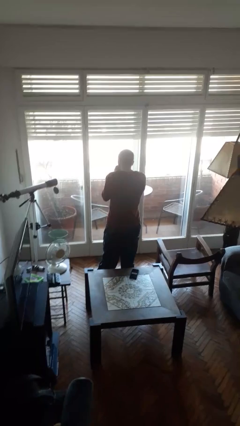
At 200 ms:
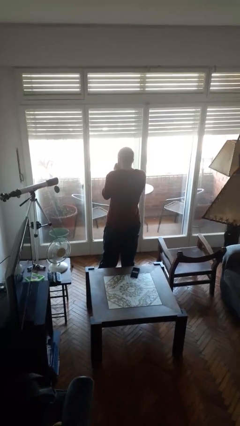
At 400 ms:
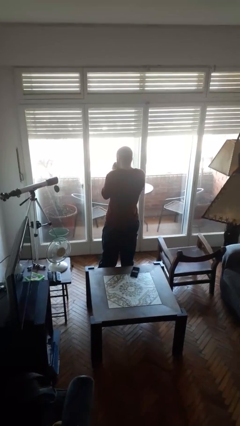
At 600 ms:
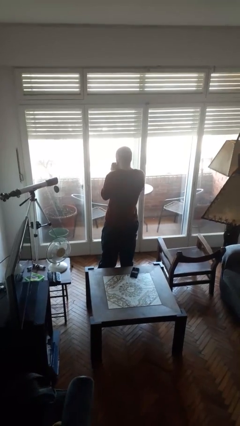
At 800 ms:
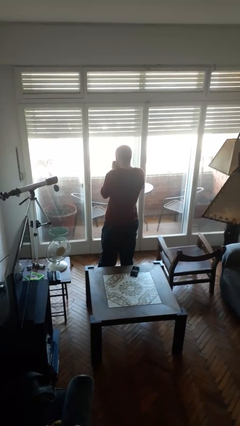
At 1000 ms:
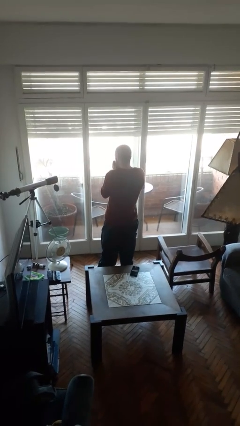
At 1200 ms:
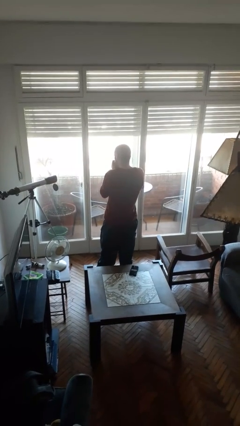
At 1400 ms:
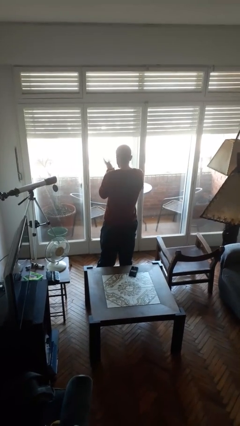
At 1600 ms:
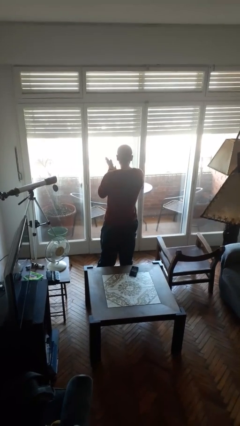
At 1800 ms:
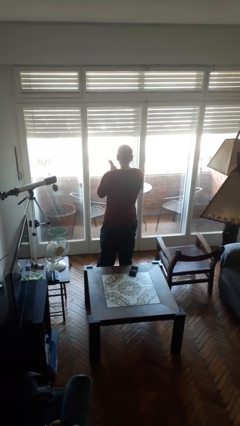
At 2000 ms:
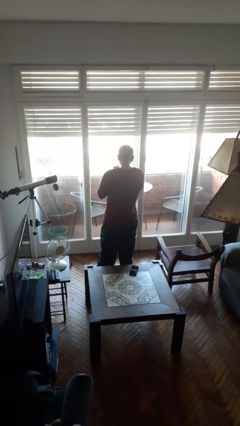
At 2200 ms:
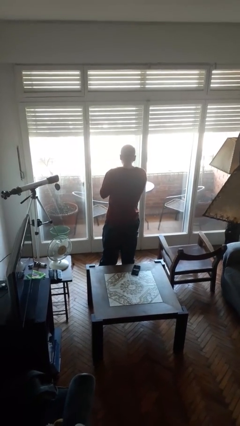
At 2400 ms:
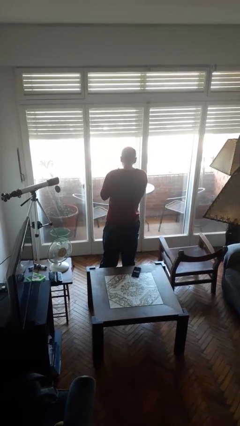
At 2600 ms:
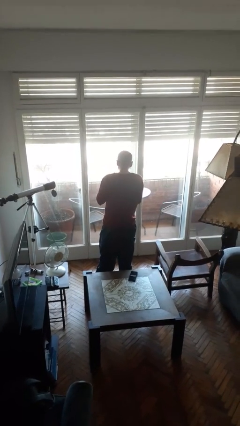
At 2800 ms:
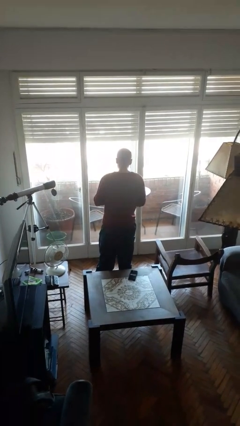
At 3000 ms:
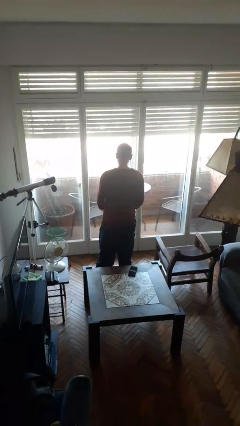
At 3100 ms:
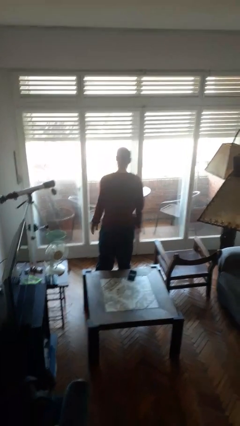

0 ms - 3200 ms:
person blows into hands

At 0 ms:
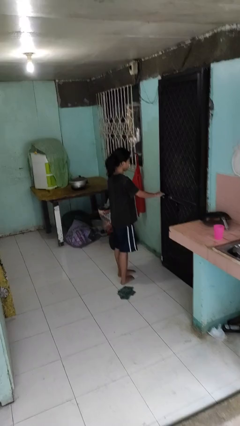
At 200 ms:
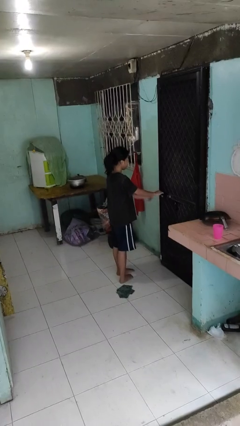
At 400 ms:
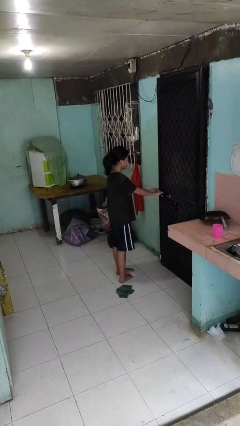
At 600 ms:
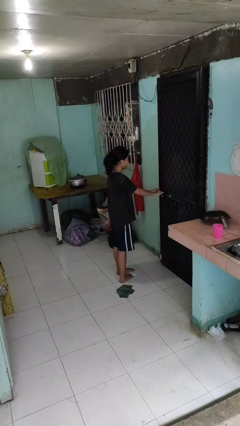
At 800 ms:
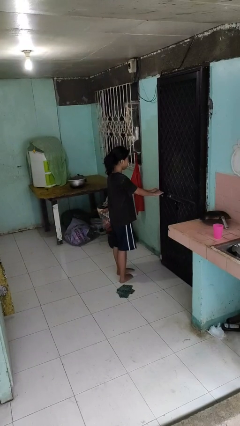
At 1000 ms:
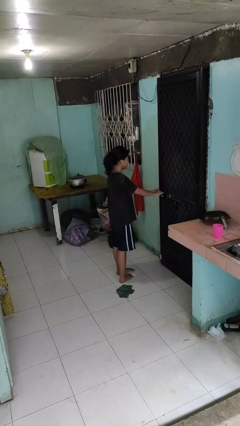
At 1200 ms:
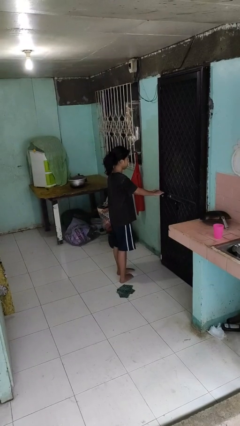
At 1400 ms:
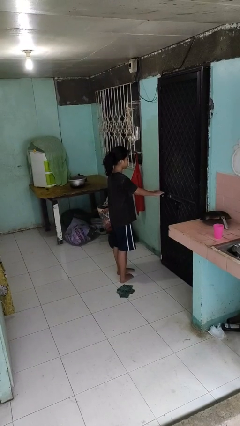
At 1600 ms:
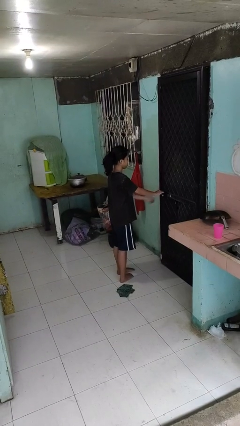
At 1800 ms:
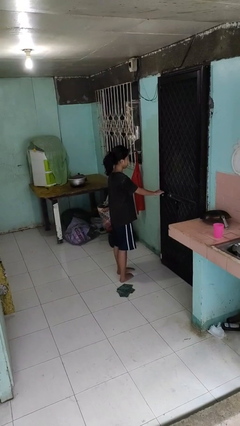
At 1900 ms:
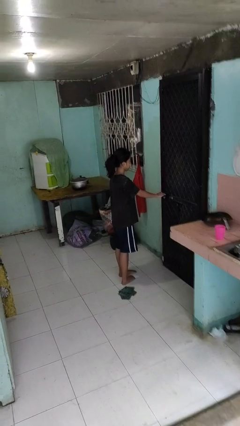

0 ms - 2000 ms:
person locks door with keys

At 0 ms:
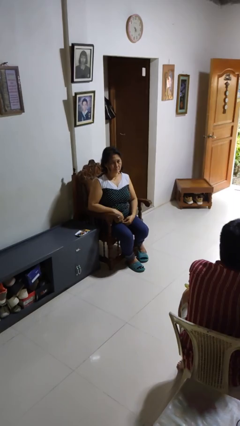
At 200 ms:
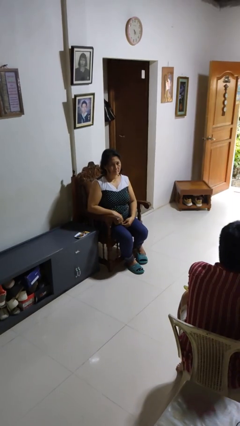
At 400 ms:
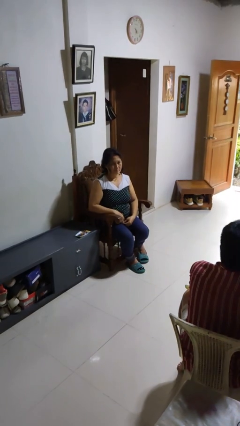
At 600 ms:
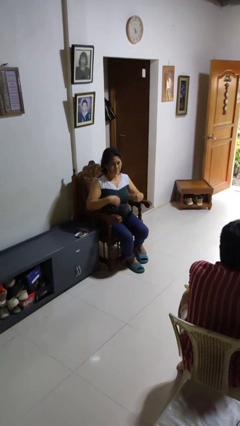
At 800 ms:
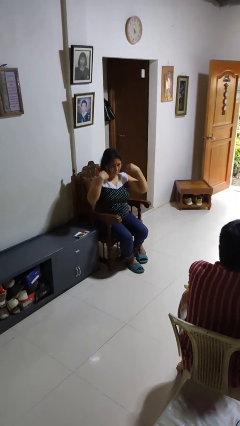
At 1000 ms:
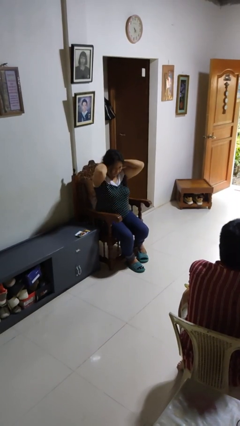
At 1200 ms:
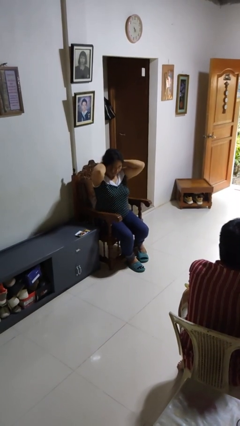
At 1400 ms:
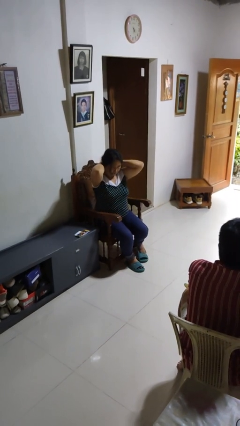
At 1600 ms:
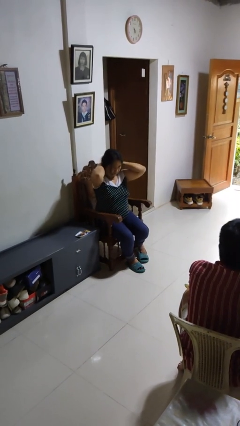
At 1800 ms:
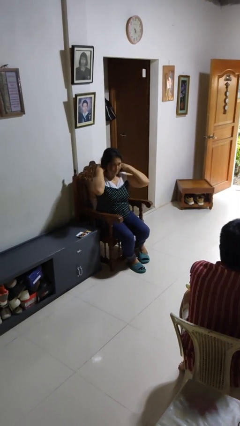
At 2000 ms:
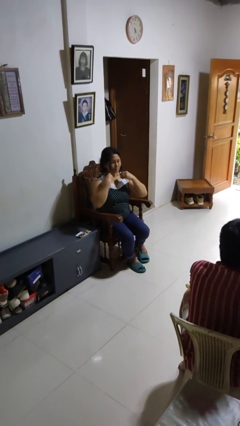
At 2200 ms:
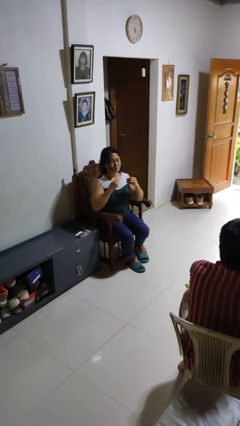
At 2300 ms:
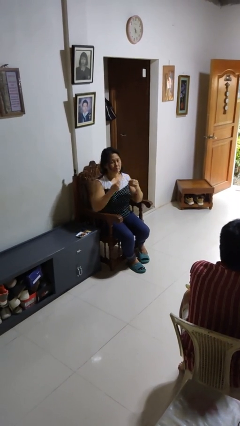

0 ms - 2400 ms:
person takes off necklace

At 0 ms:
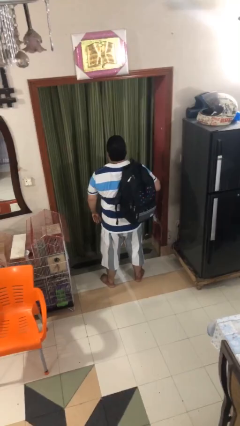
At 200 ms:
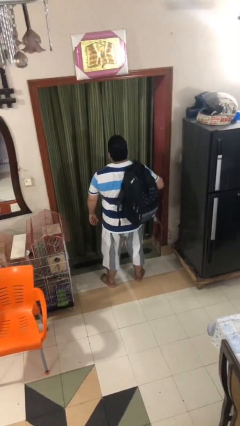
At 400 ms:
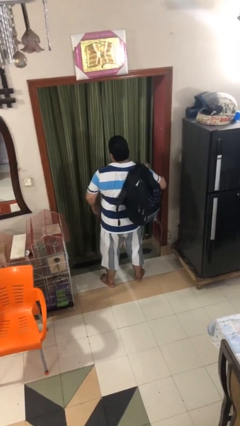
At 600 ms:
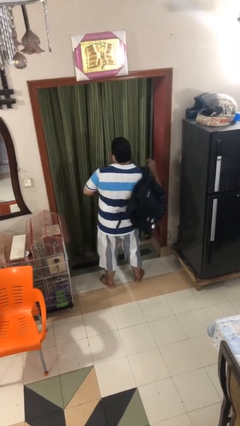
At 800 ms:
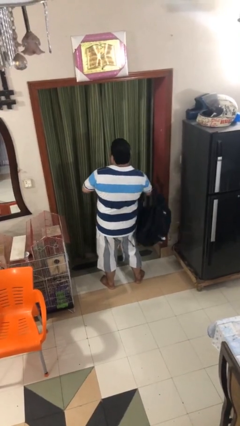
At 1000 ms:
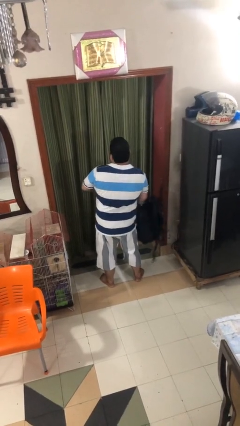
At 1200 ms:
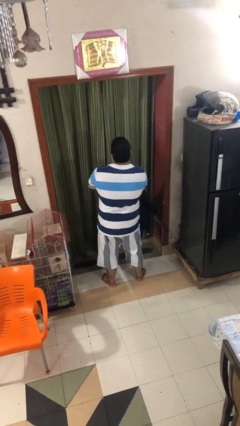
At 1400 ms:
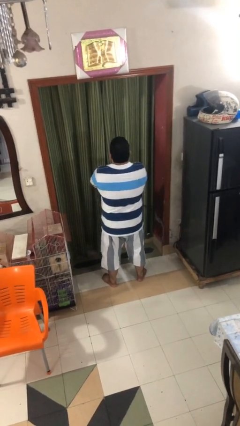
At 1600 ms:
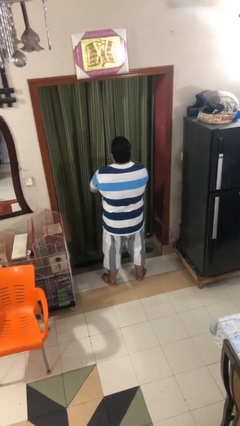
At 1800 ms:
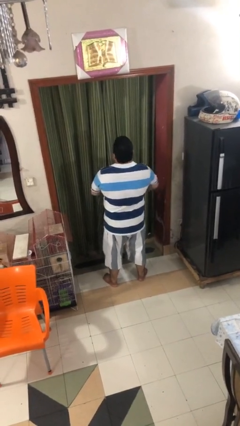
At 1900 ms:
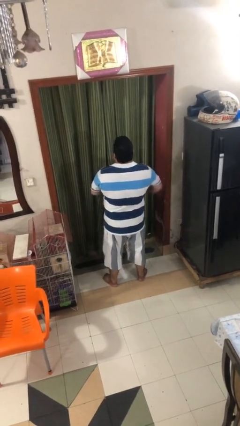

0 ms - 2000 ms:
person takes off backpack

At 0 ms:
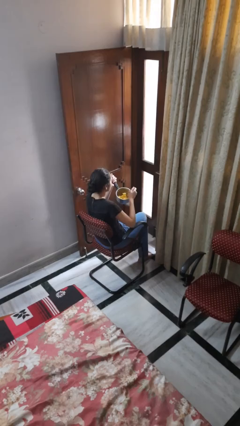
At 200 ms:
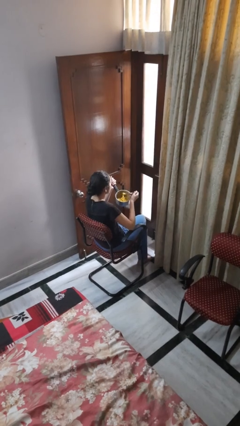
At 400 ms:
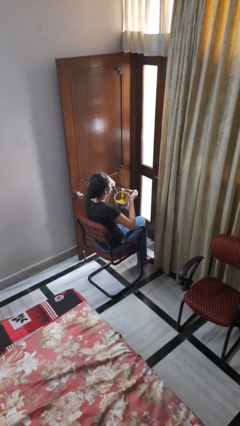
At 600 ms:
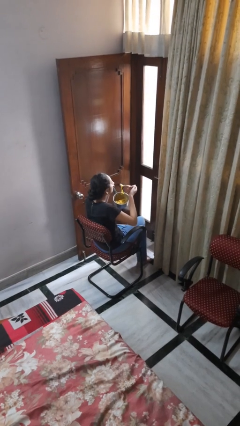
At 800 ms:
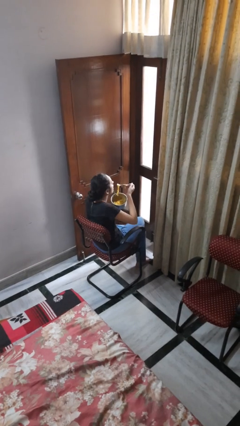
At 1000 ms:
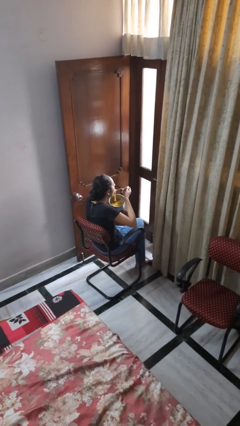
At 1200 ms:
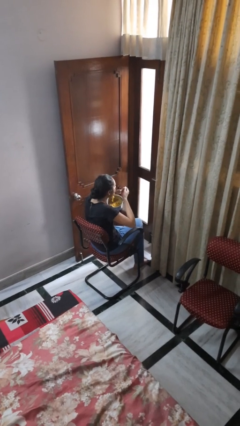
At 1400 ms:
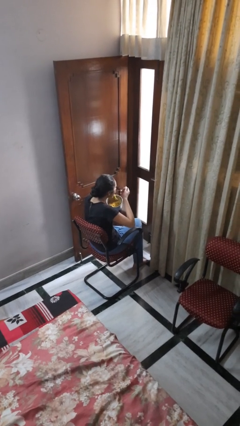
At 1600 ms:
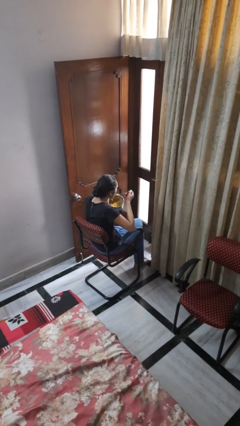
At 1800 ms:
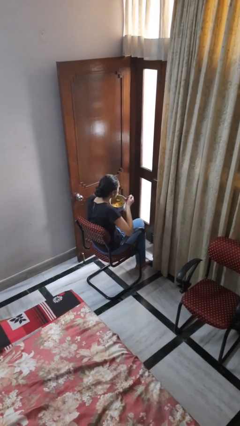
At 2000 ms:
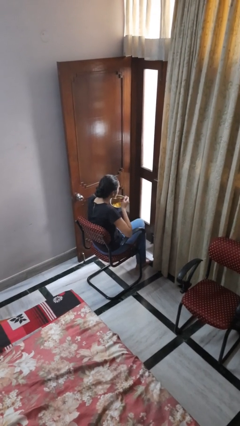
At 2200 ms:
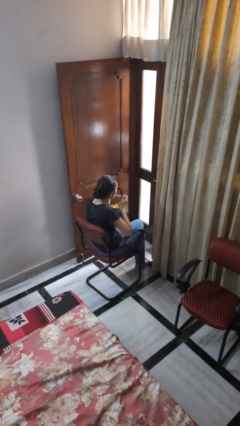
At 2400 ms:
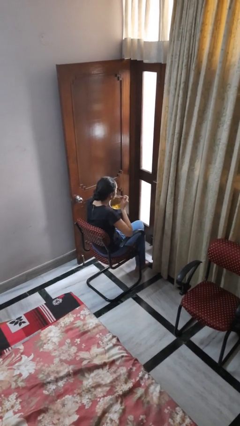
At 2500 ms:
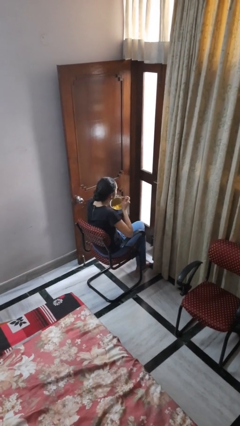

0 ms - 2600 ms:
person eats with utensil

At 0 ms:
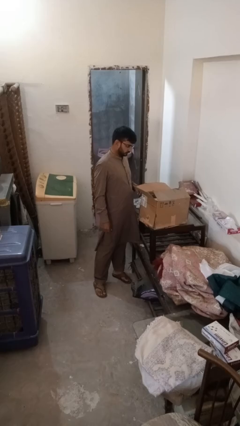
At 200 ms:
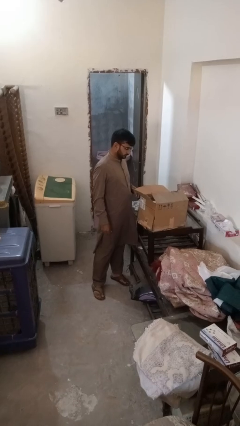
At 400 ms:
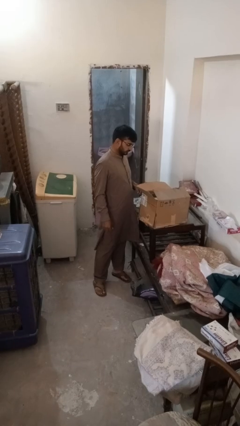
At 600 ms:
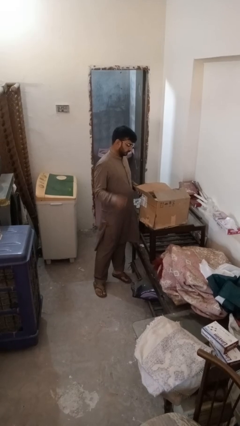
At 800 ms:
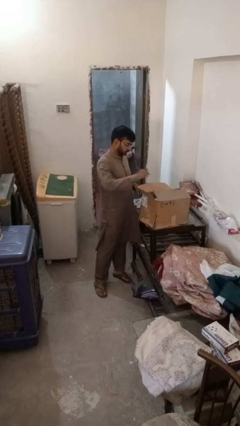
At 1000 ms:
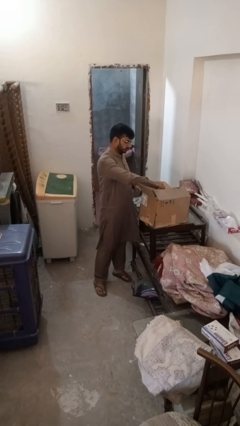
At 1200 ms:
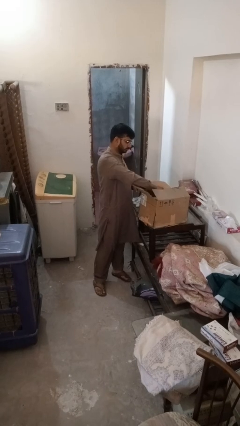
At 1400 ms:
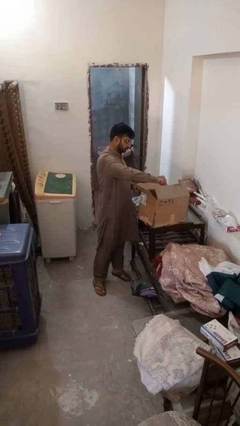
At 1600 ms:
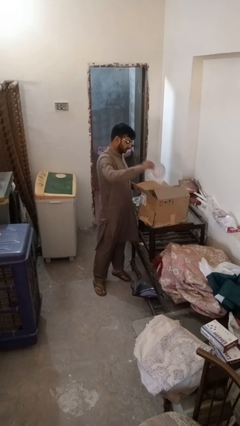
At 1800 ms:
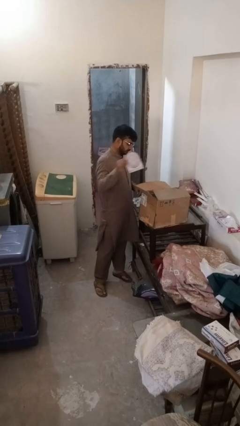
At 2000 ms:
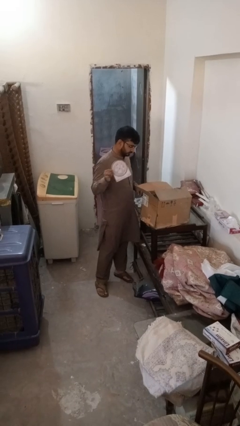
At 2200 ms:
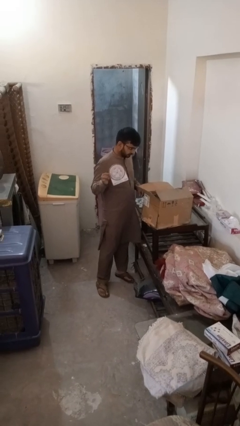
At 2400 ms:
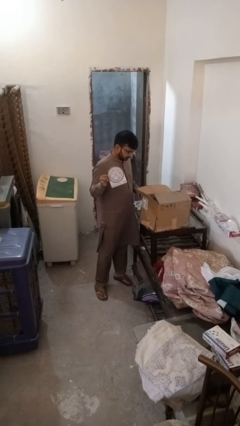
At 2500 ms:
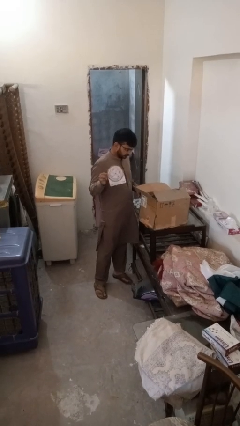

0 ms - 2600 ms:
person takes object from box

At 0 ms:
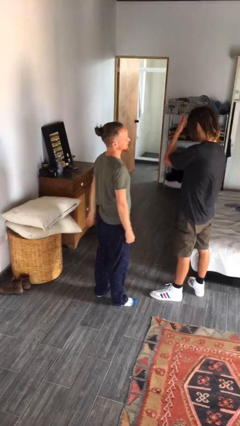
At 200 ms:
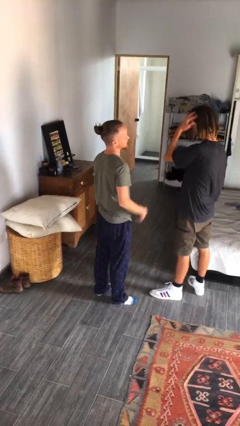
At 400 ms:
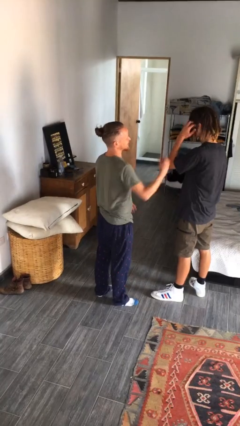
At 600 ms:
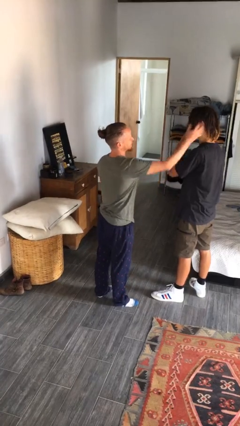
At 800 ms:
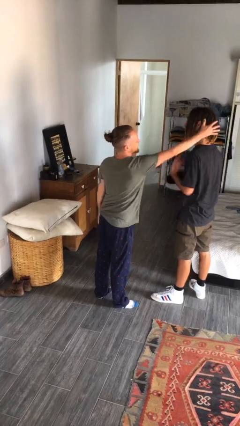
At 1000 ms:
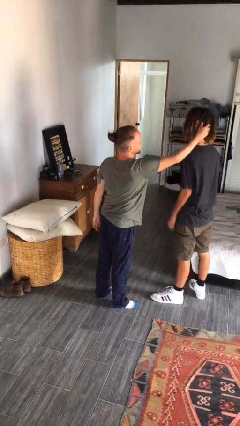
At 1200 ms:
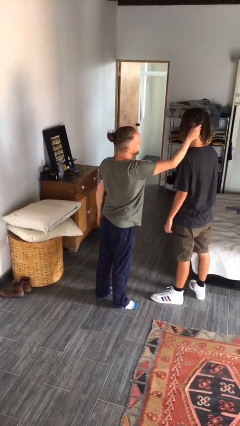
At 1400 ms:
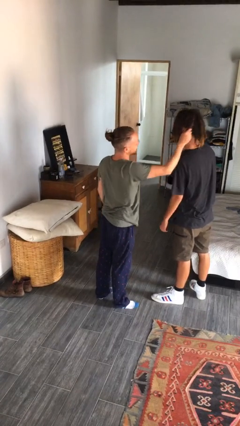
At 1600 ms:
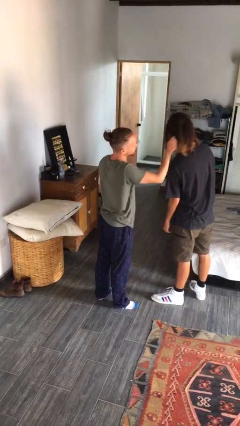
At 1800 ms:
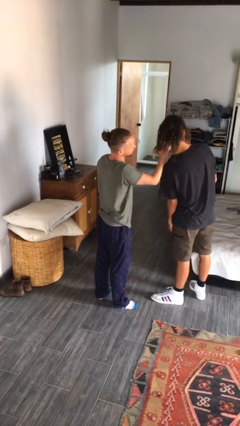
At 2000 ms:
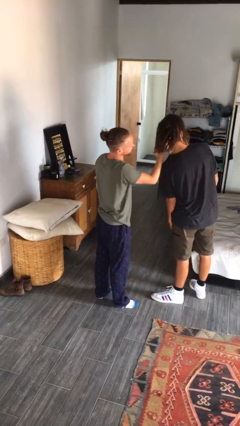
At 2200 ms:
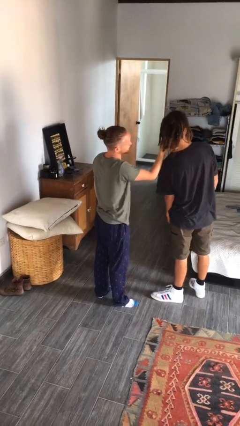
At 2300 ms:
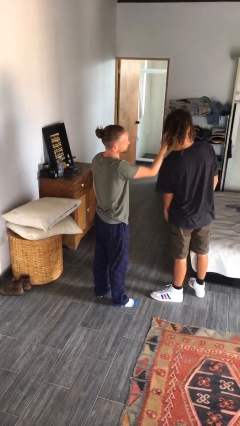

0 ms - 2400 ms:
person grabs person by hair
